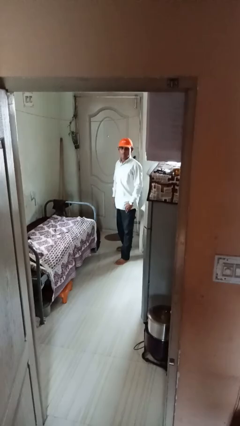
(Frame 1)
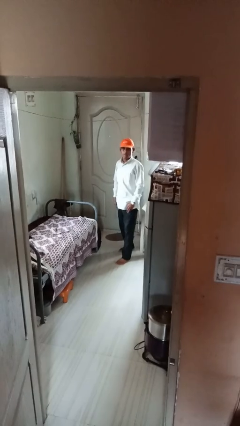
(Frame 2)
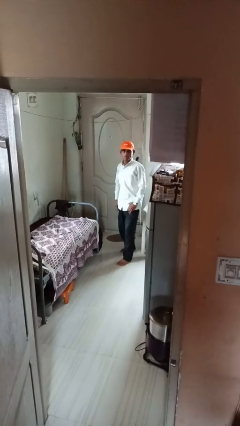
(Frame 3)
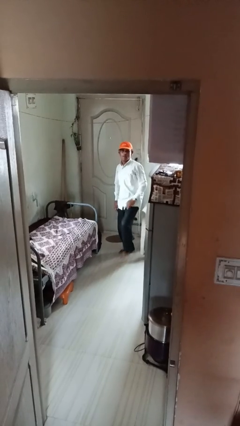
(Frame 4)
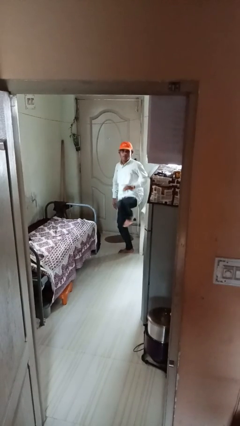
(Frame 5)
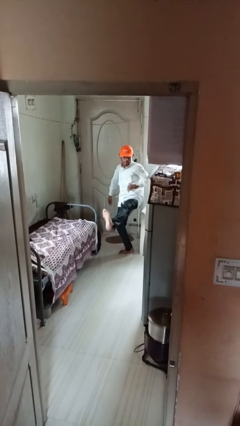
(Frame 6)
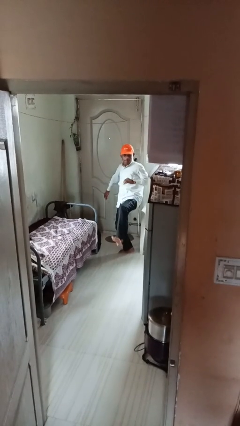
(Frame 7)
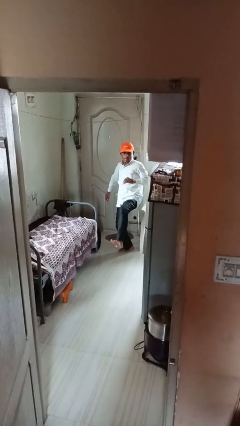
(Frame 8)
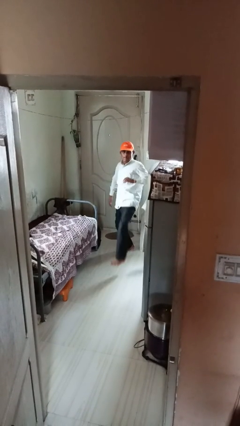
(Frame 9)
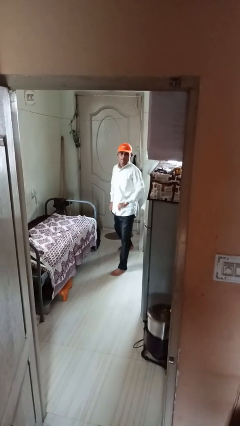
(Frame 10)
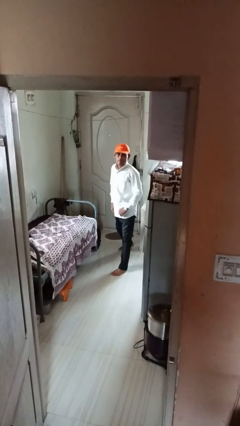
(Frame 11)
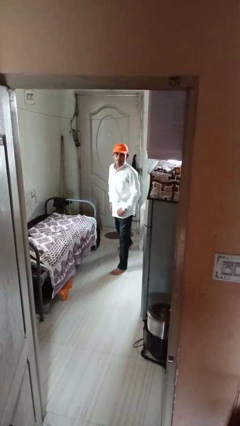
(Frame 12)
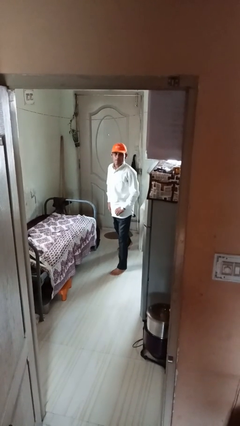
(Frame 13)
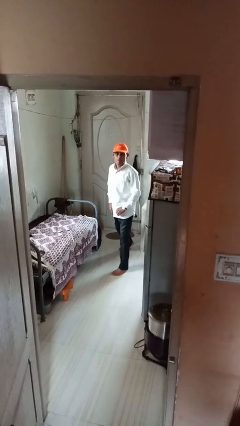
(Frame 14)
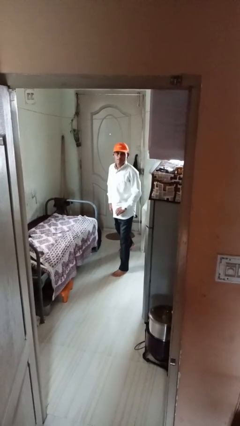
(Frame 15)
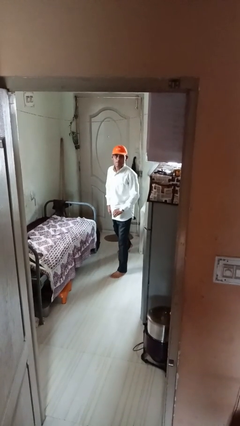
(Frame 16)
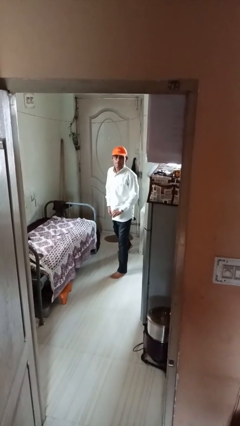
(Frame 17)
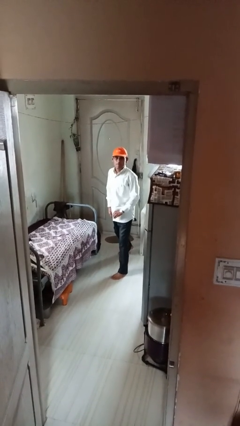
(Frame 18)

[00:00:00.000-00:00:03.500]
person karate kicks

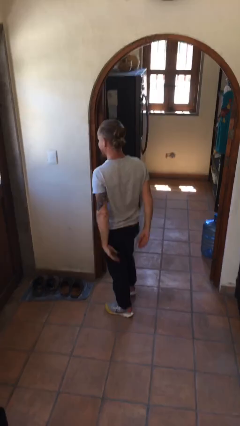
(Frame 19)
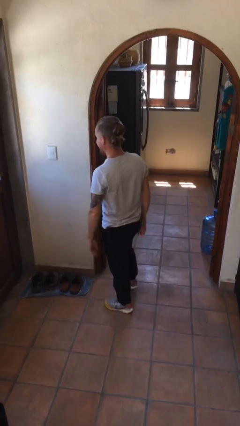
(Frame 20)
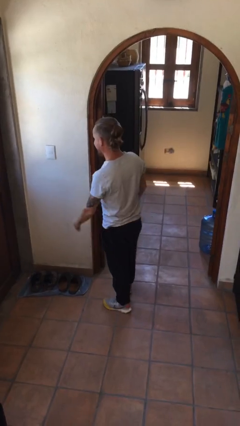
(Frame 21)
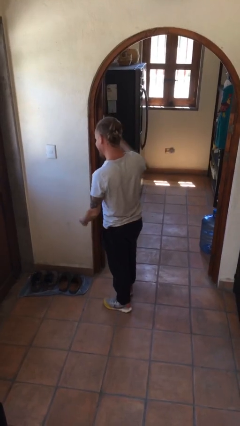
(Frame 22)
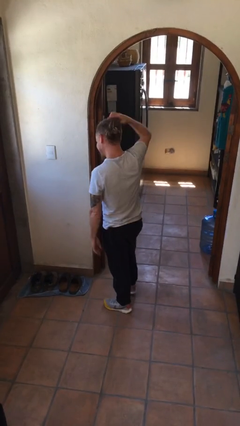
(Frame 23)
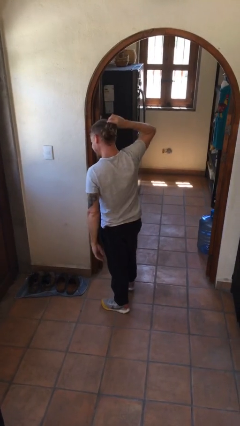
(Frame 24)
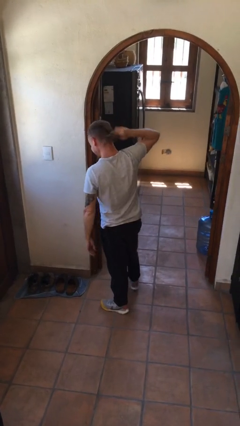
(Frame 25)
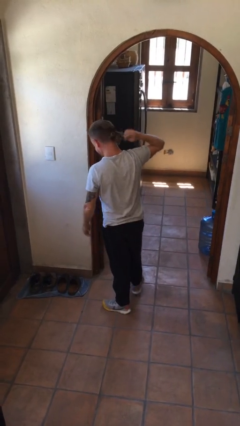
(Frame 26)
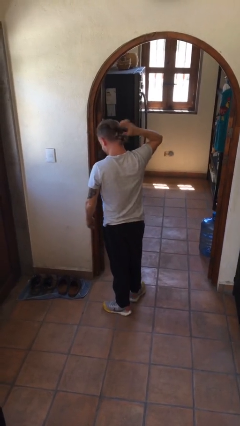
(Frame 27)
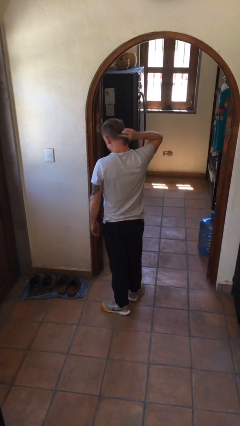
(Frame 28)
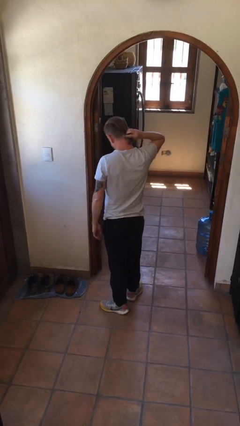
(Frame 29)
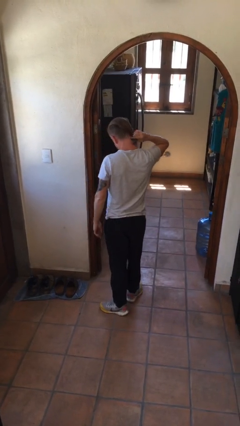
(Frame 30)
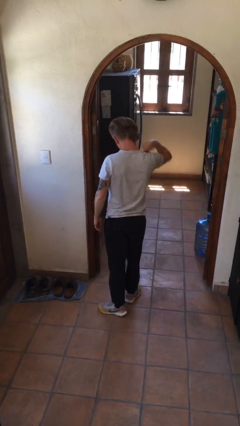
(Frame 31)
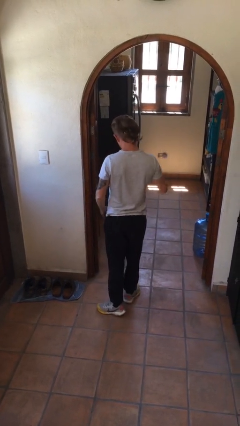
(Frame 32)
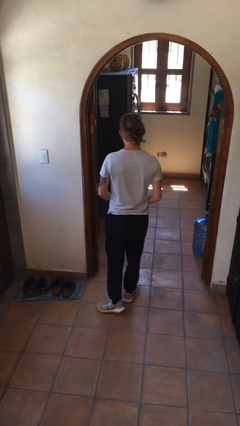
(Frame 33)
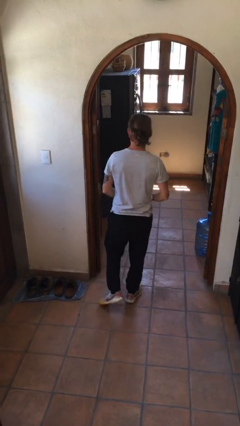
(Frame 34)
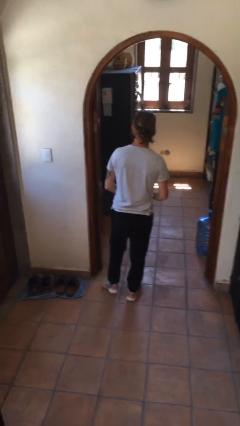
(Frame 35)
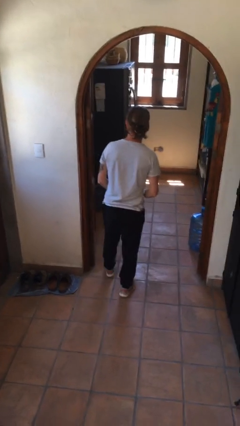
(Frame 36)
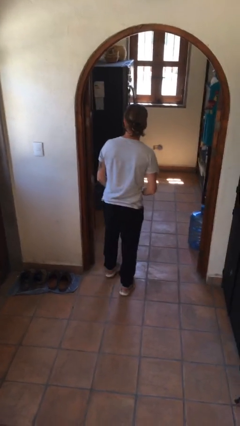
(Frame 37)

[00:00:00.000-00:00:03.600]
person takes off hairtie

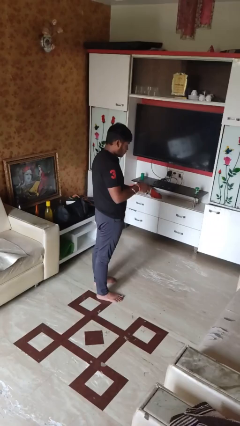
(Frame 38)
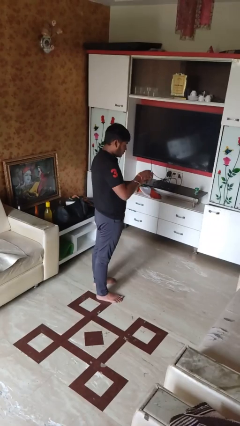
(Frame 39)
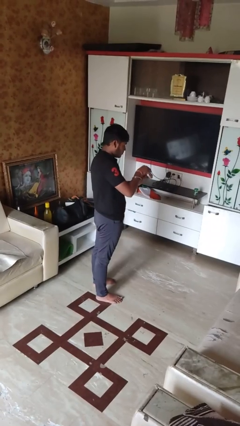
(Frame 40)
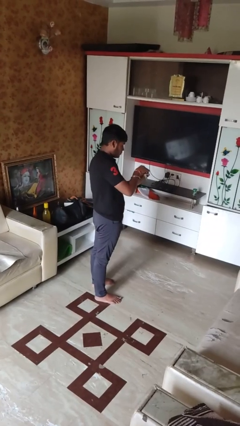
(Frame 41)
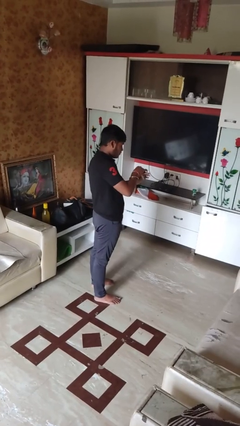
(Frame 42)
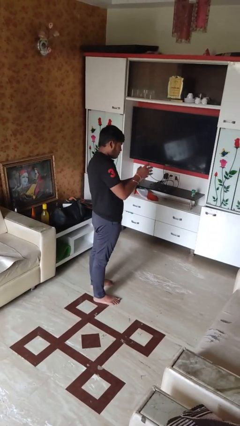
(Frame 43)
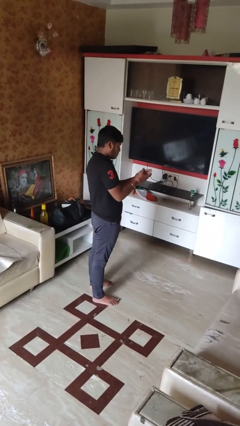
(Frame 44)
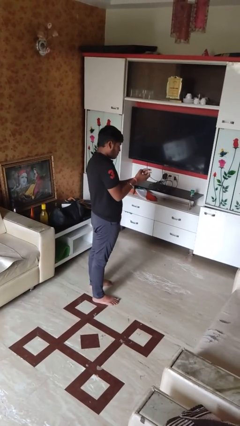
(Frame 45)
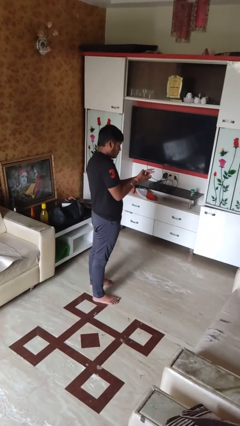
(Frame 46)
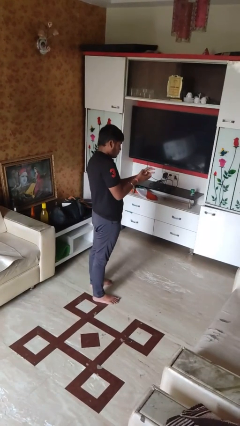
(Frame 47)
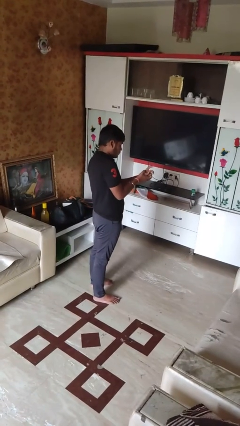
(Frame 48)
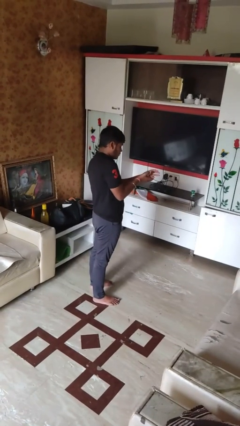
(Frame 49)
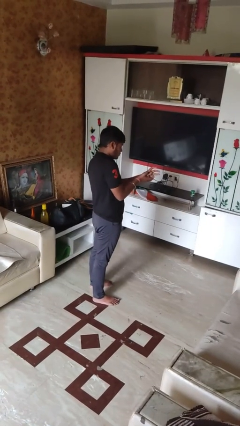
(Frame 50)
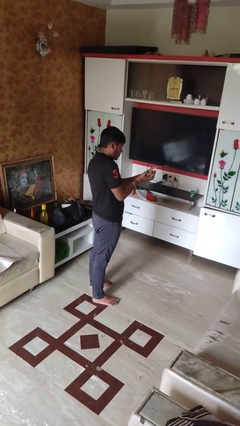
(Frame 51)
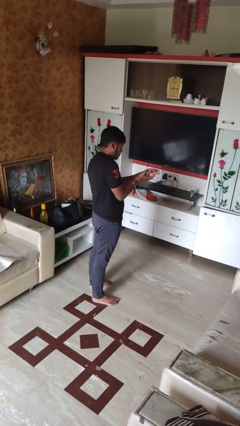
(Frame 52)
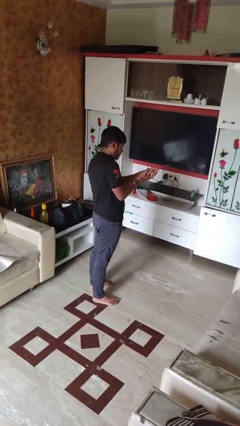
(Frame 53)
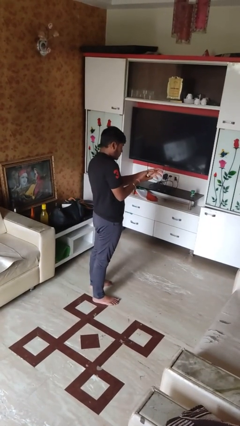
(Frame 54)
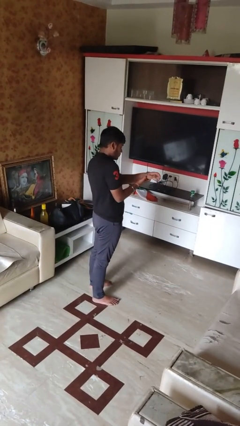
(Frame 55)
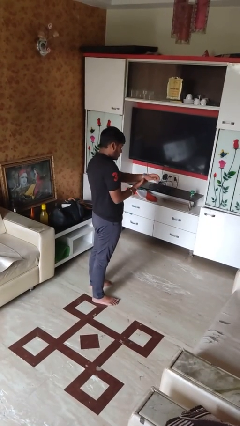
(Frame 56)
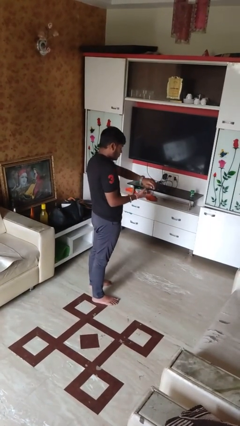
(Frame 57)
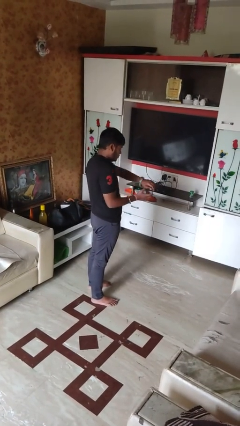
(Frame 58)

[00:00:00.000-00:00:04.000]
person puts on wristwatch

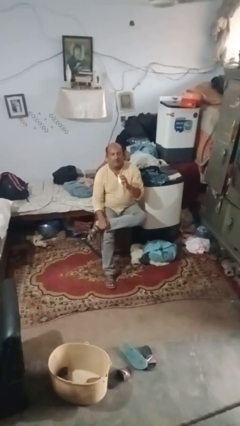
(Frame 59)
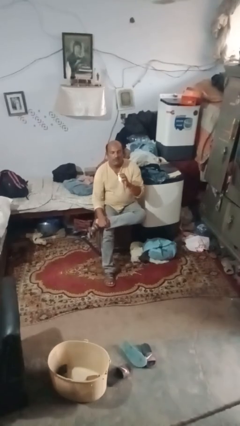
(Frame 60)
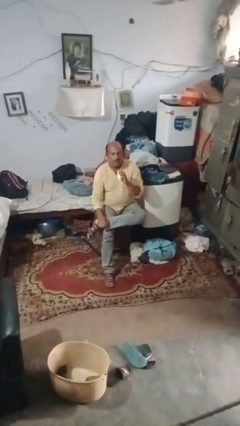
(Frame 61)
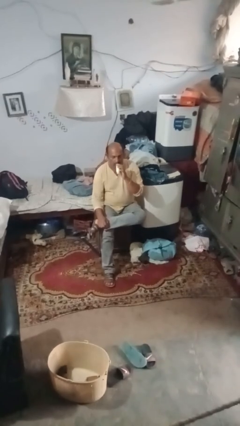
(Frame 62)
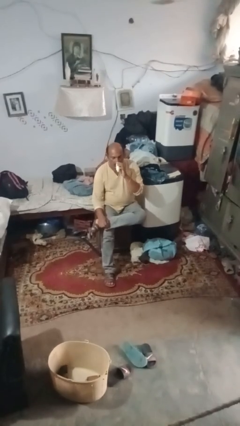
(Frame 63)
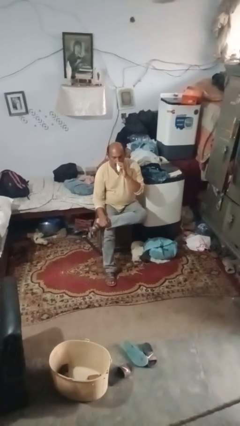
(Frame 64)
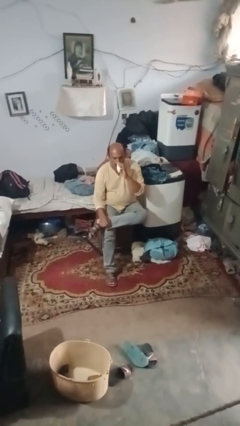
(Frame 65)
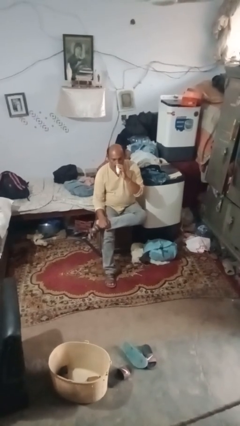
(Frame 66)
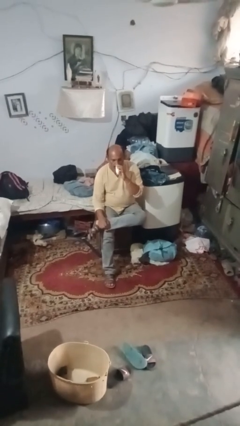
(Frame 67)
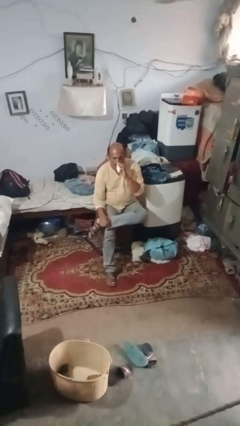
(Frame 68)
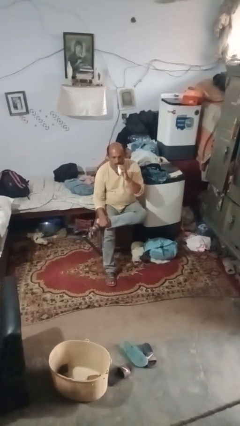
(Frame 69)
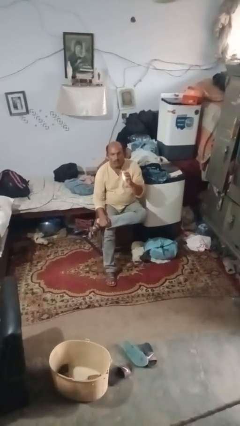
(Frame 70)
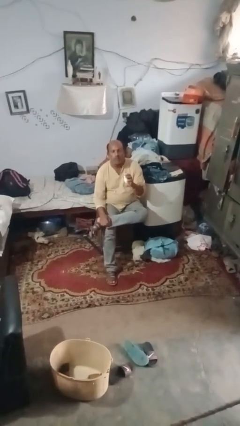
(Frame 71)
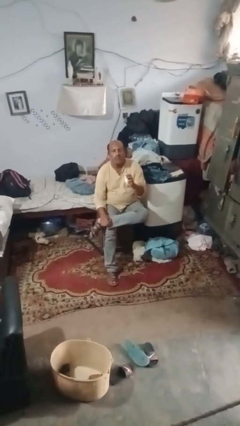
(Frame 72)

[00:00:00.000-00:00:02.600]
person vapes

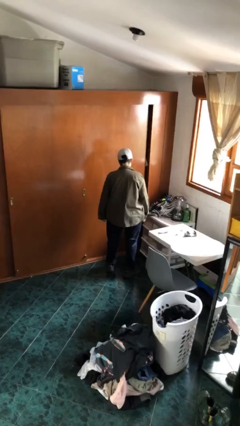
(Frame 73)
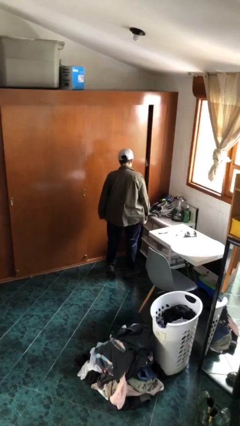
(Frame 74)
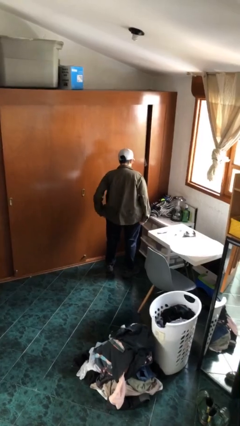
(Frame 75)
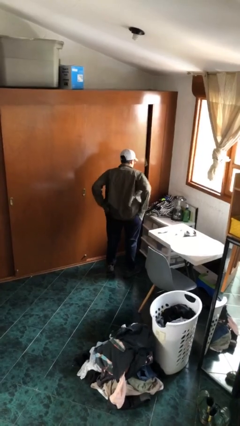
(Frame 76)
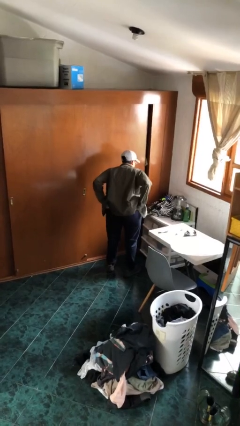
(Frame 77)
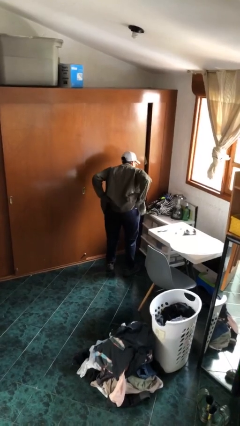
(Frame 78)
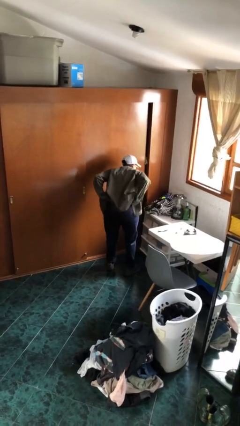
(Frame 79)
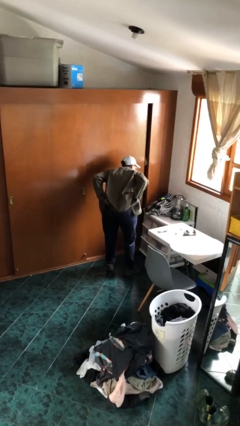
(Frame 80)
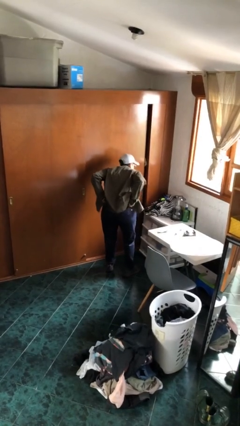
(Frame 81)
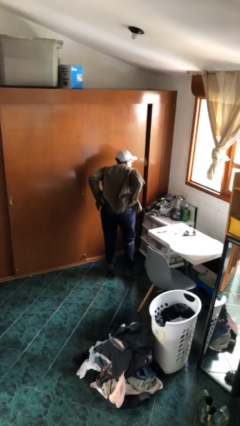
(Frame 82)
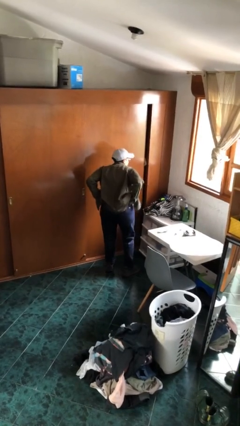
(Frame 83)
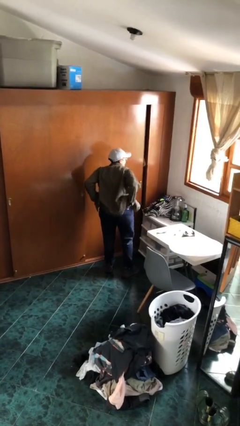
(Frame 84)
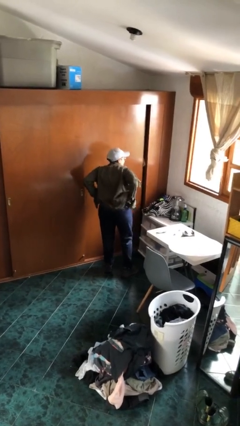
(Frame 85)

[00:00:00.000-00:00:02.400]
person hikes up pants

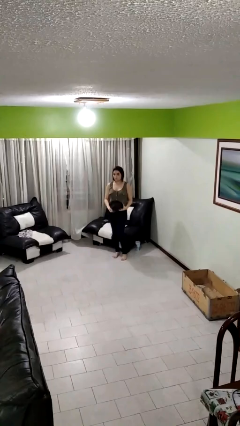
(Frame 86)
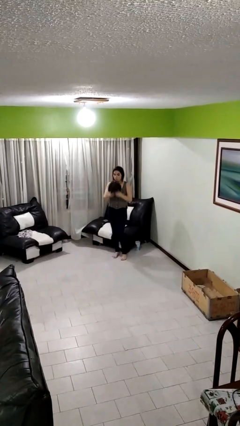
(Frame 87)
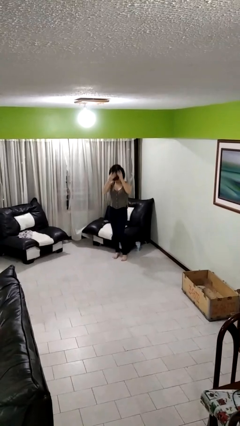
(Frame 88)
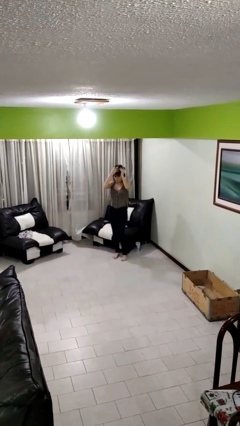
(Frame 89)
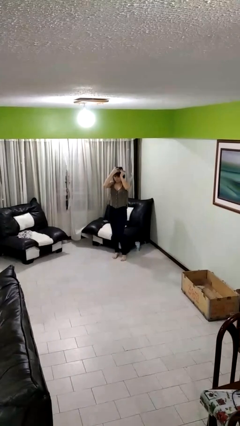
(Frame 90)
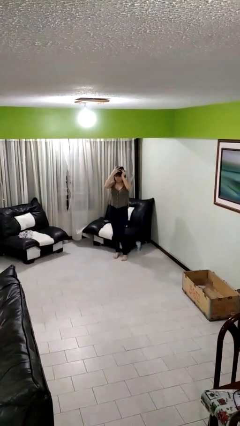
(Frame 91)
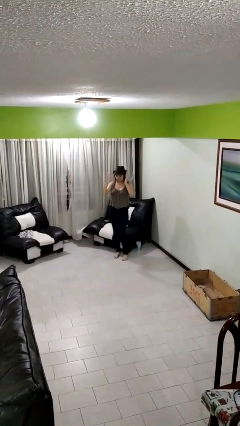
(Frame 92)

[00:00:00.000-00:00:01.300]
person puts on hat
